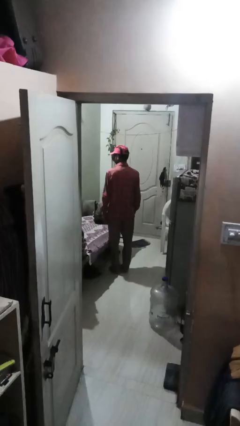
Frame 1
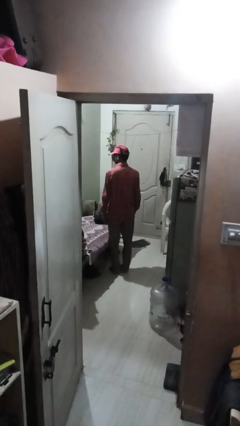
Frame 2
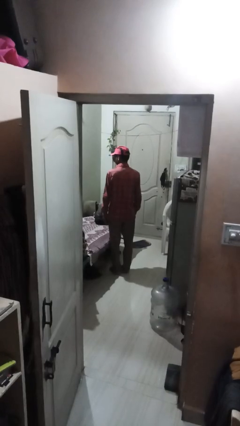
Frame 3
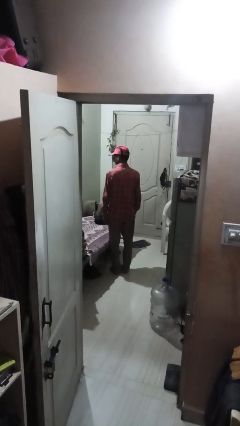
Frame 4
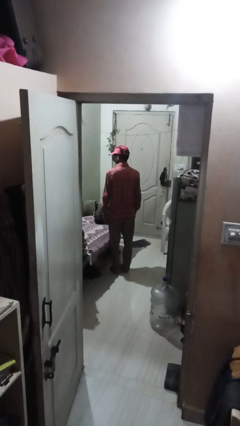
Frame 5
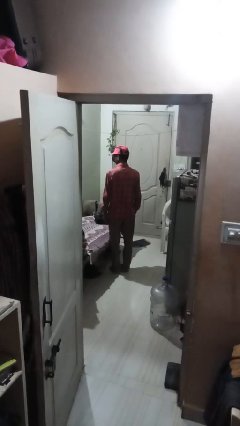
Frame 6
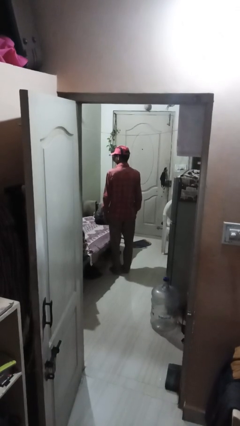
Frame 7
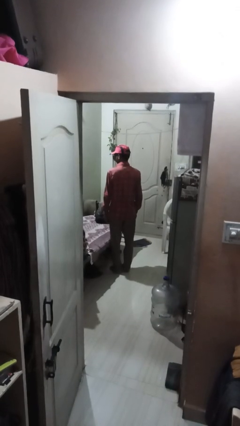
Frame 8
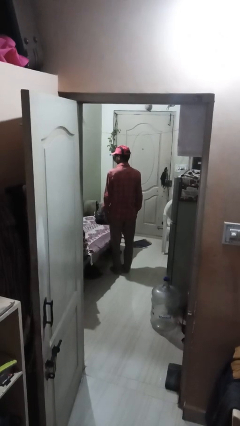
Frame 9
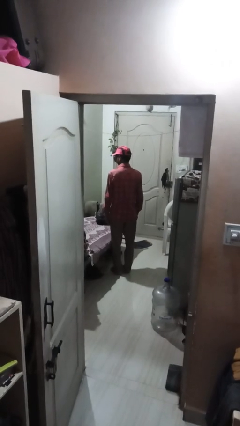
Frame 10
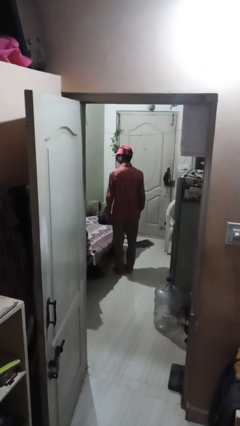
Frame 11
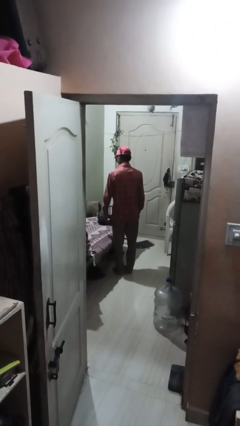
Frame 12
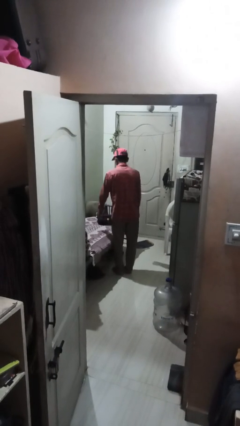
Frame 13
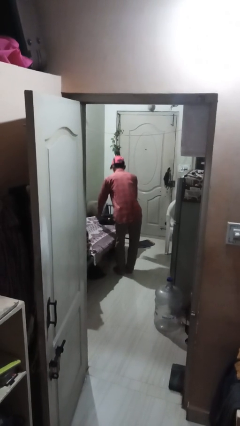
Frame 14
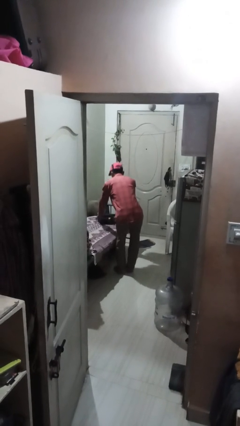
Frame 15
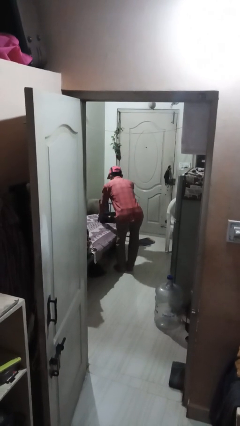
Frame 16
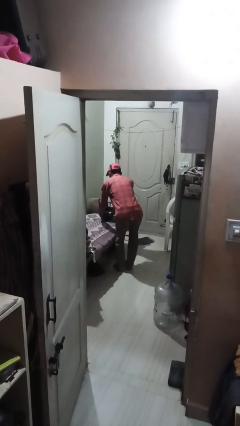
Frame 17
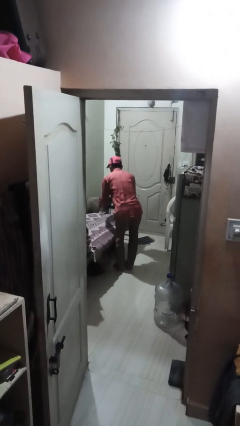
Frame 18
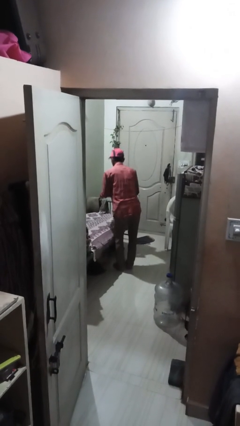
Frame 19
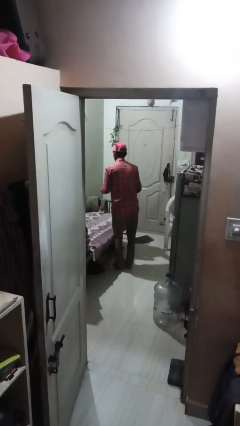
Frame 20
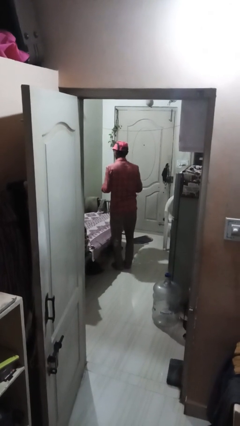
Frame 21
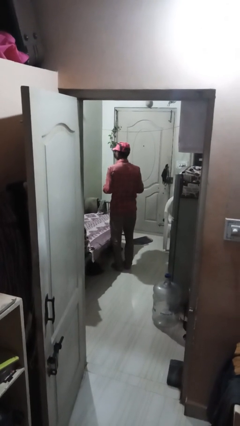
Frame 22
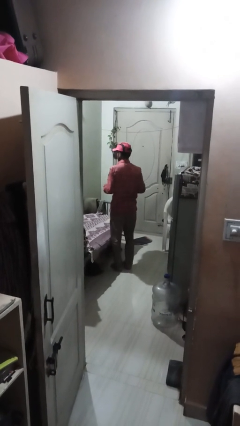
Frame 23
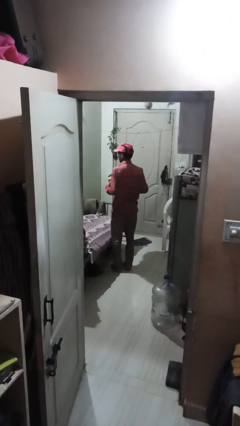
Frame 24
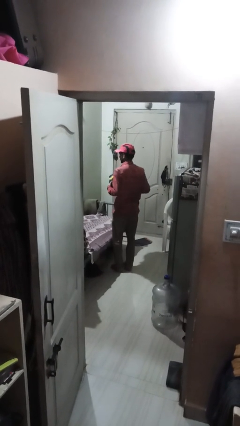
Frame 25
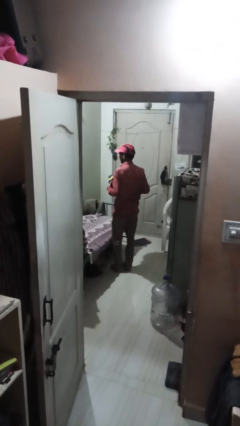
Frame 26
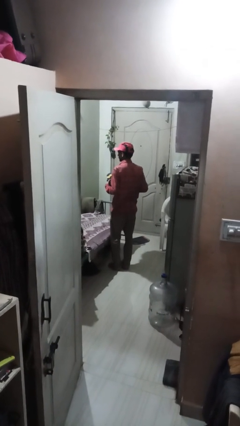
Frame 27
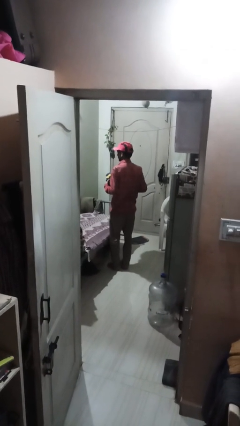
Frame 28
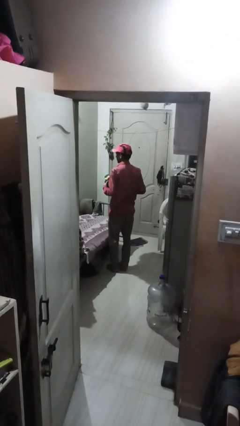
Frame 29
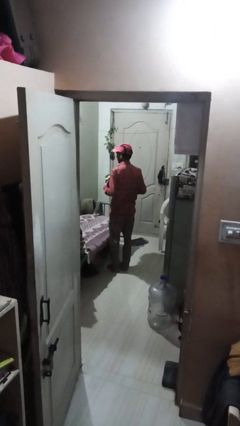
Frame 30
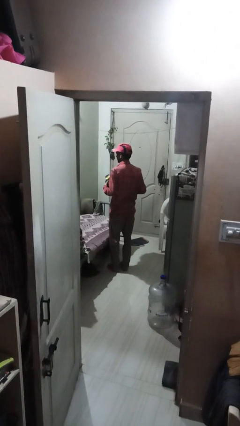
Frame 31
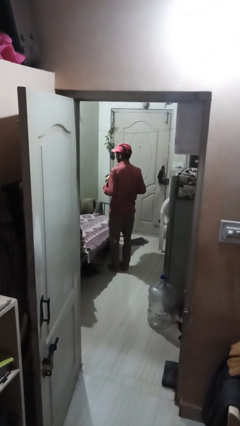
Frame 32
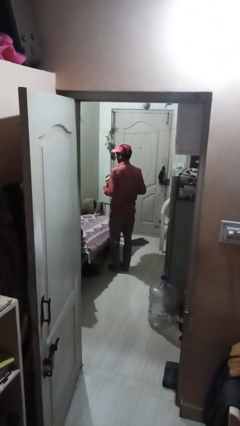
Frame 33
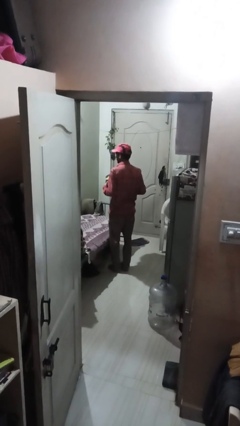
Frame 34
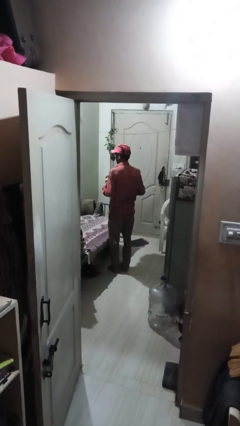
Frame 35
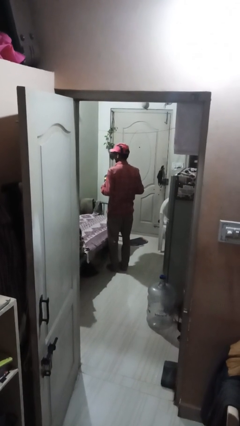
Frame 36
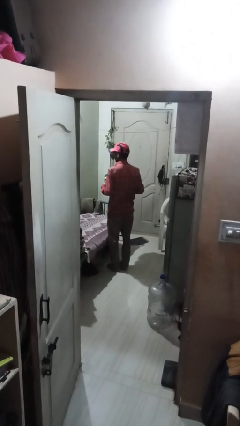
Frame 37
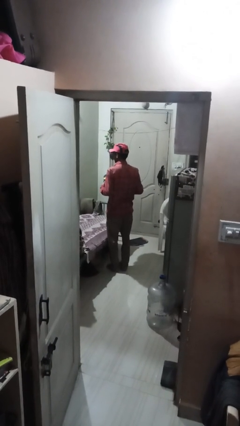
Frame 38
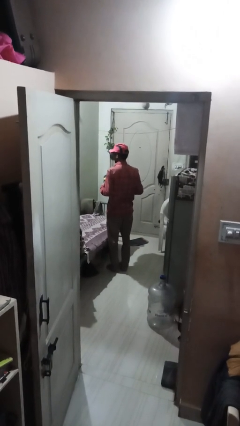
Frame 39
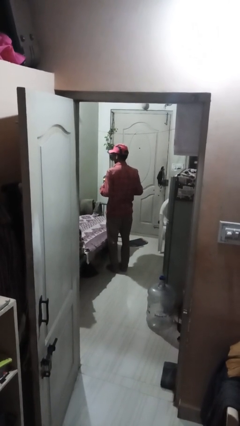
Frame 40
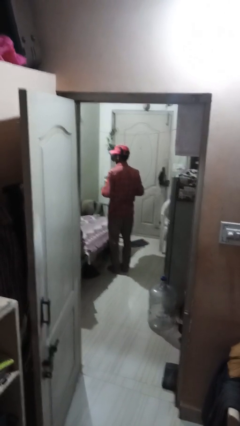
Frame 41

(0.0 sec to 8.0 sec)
person picks up object from bed

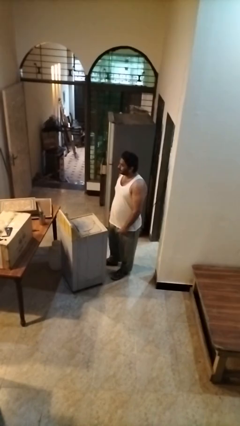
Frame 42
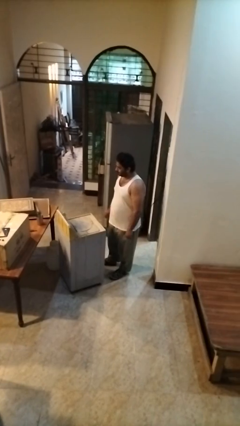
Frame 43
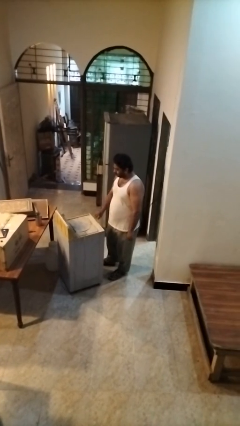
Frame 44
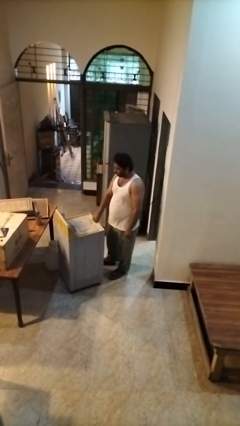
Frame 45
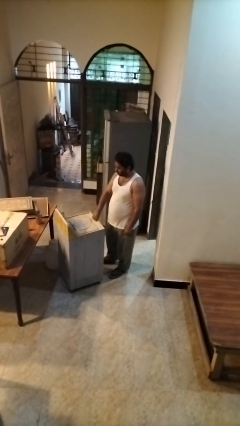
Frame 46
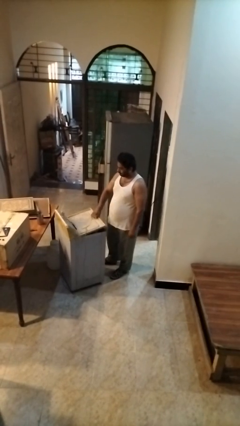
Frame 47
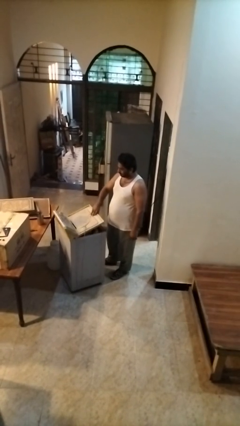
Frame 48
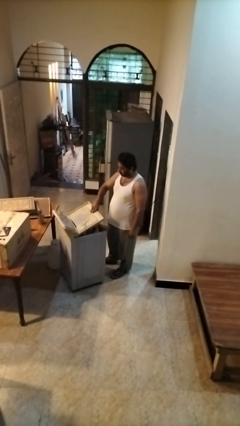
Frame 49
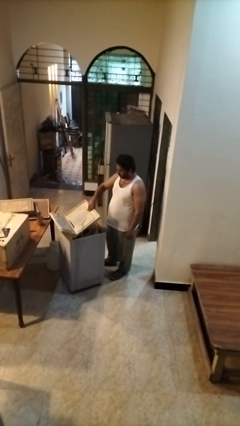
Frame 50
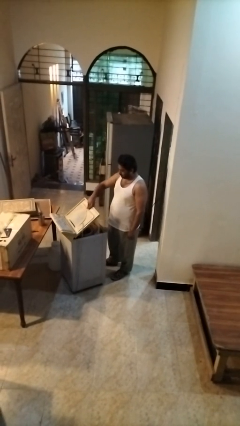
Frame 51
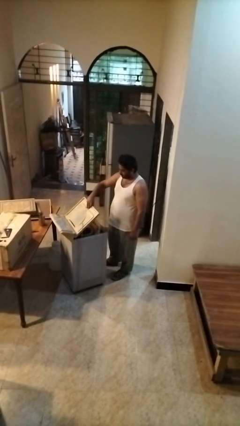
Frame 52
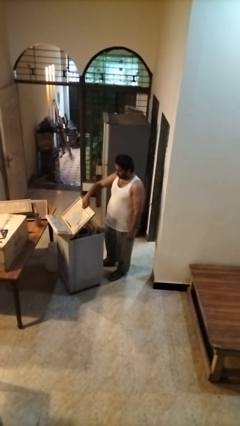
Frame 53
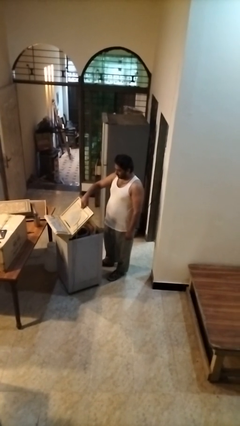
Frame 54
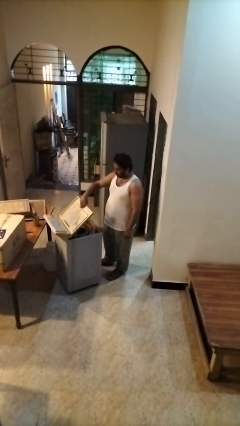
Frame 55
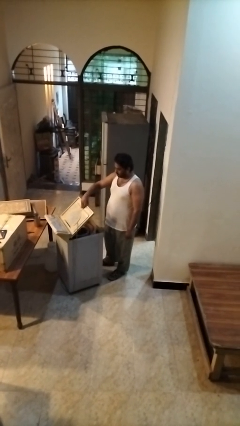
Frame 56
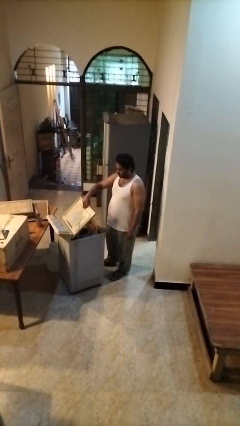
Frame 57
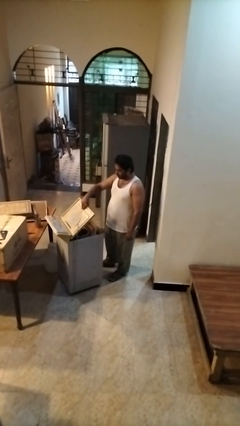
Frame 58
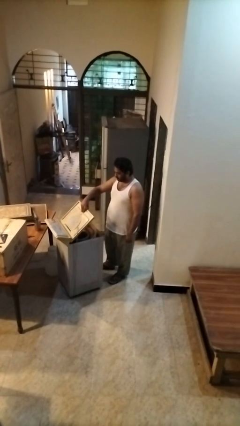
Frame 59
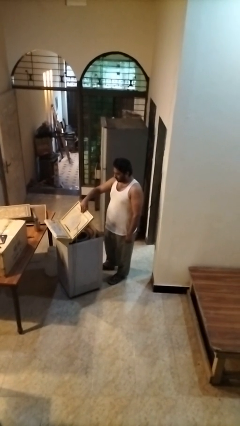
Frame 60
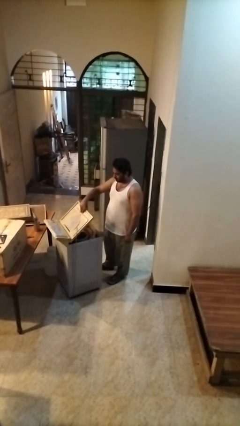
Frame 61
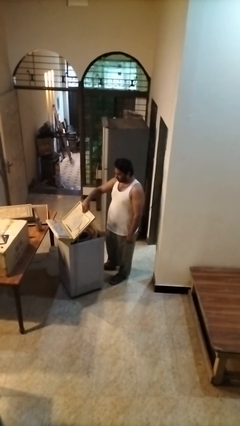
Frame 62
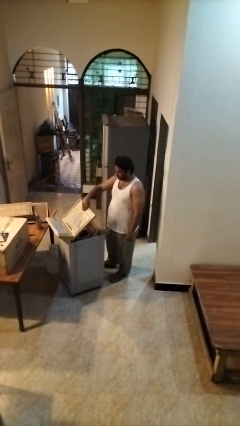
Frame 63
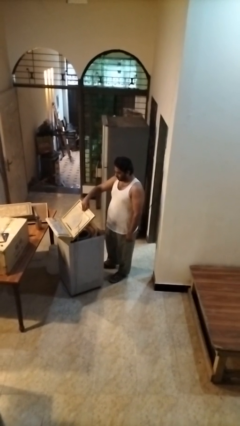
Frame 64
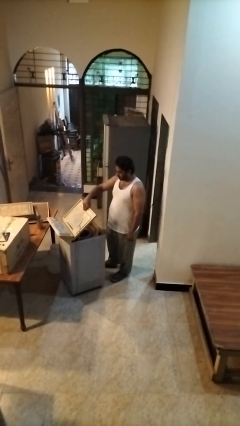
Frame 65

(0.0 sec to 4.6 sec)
person opens clothes washer

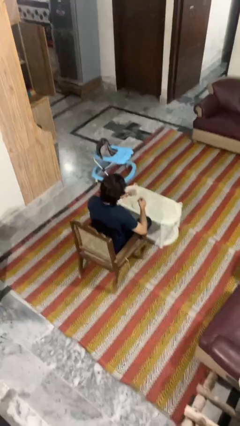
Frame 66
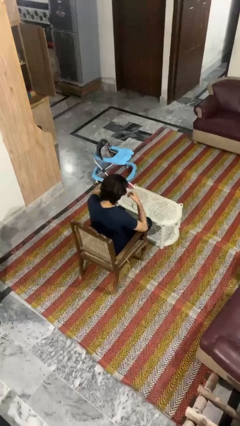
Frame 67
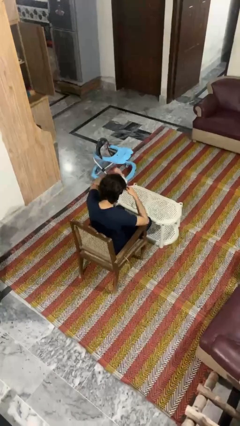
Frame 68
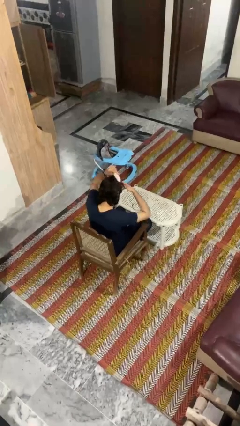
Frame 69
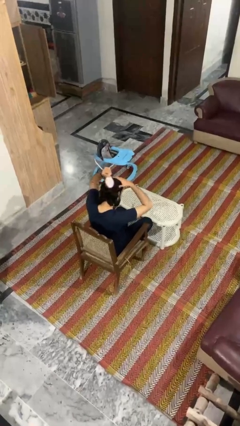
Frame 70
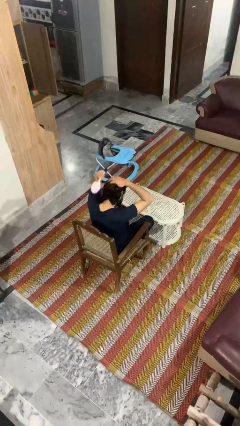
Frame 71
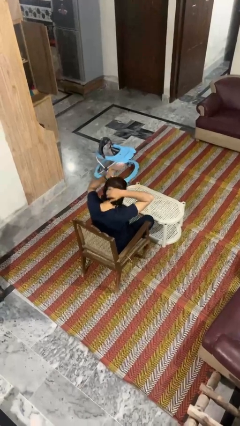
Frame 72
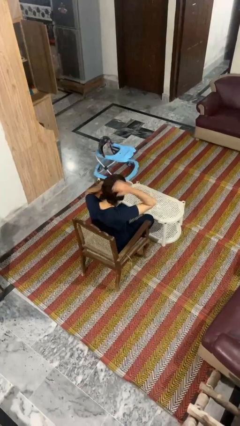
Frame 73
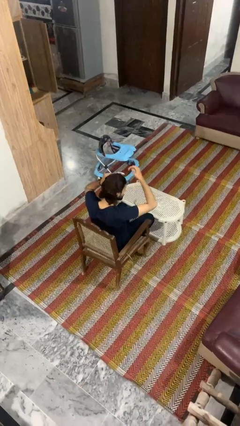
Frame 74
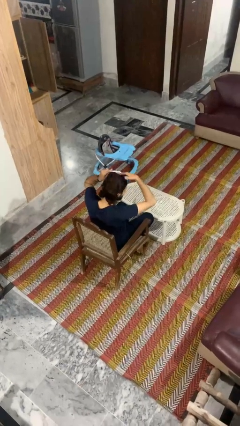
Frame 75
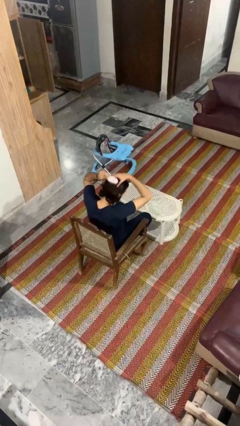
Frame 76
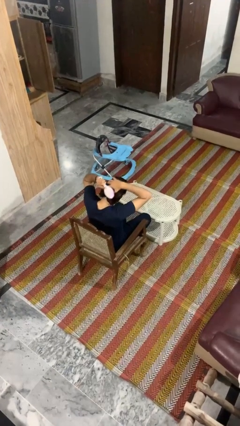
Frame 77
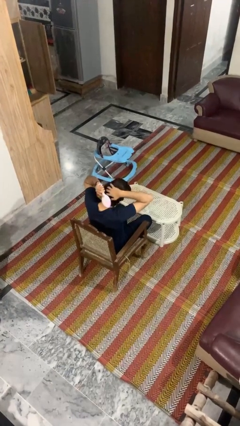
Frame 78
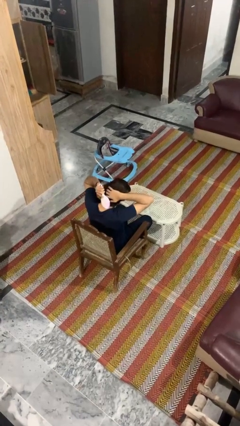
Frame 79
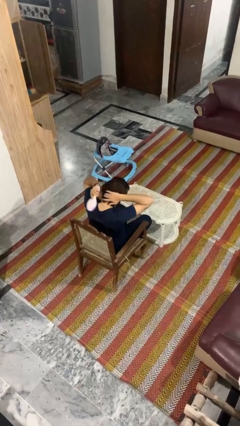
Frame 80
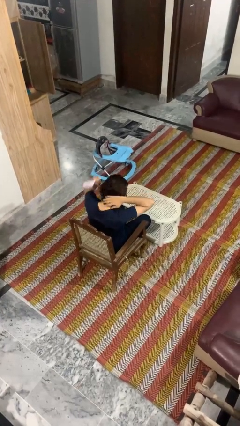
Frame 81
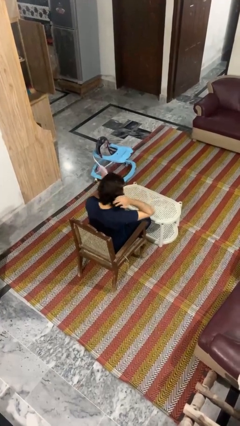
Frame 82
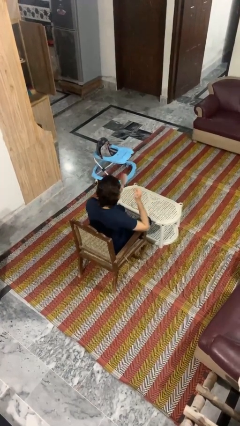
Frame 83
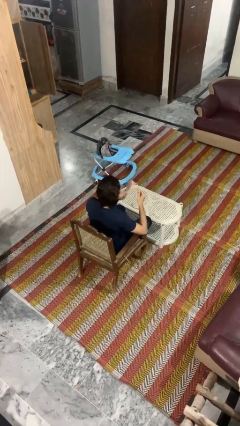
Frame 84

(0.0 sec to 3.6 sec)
person brushes hair

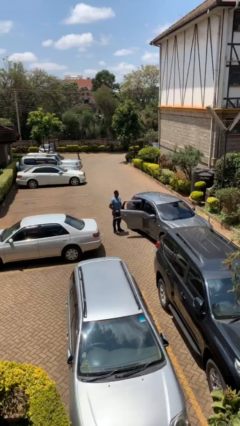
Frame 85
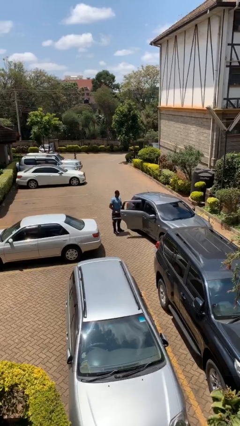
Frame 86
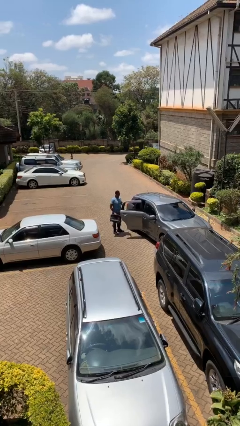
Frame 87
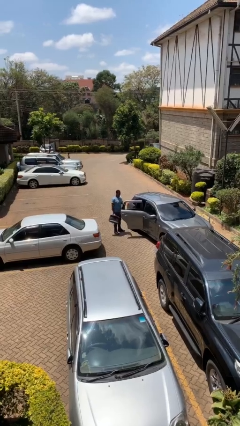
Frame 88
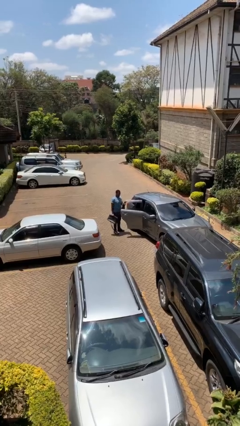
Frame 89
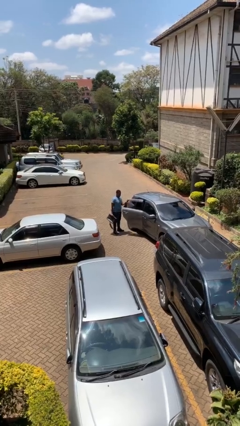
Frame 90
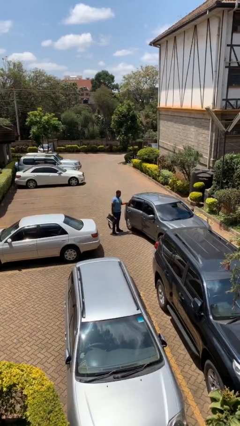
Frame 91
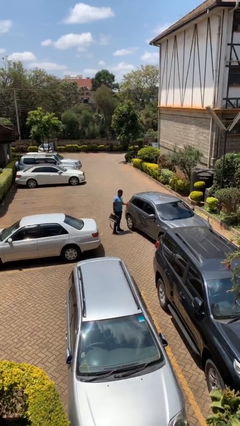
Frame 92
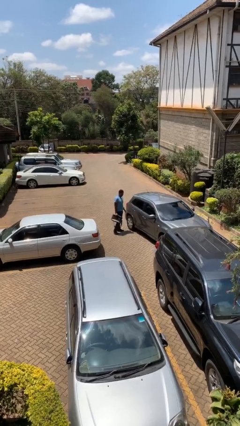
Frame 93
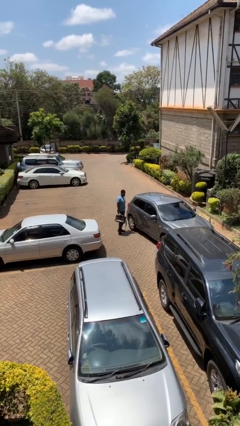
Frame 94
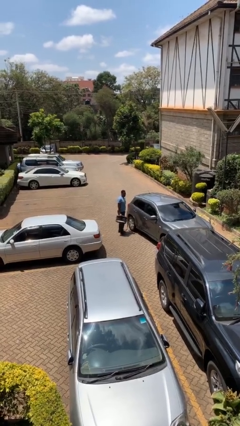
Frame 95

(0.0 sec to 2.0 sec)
person closes car door
